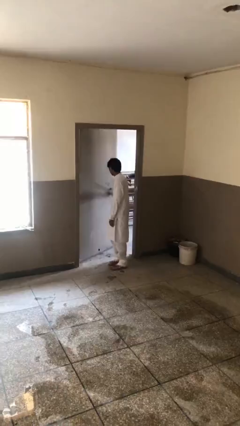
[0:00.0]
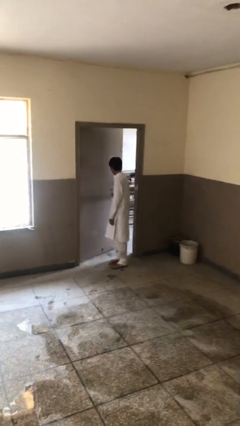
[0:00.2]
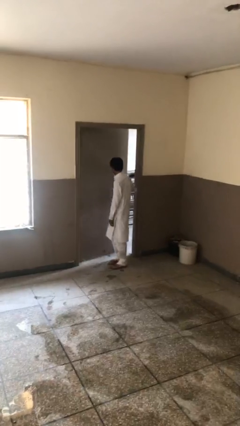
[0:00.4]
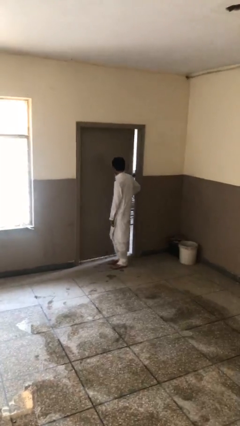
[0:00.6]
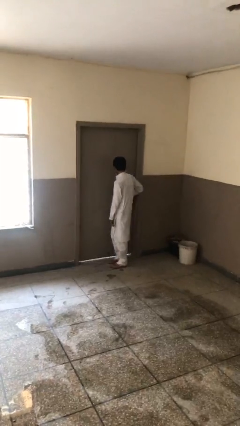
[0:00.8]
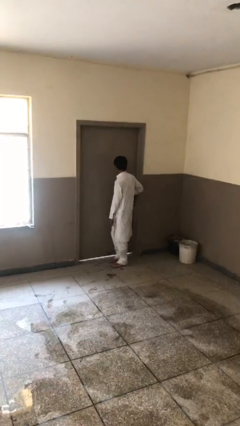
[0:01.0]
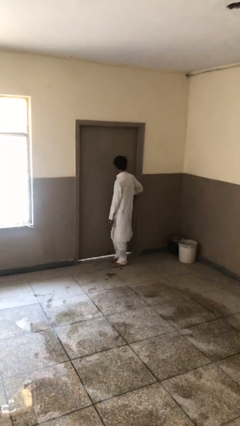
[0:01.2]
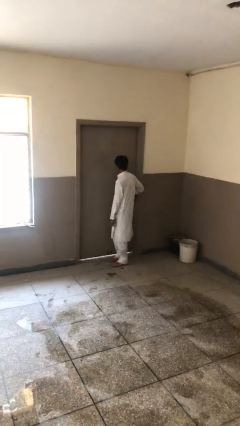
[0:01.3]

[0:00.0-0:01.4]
person closes facility door

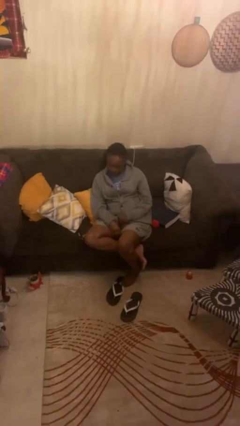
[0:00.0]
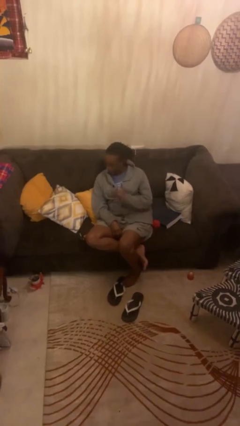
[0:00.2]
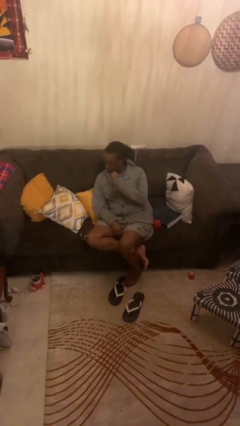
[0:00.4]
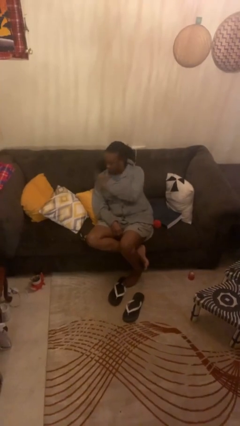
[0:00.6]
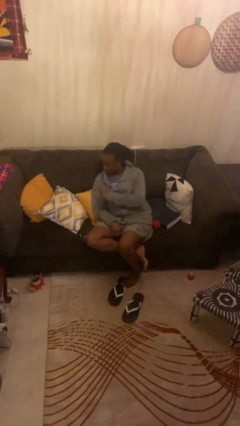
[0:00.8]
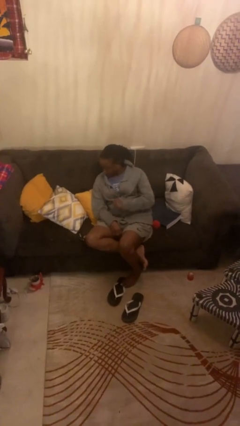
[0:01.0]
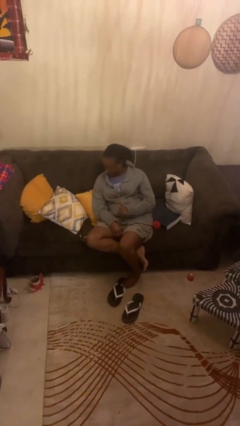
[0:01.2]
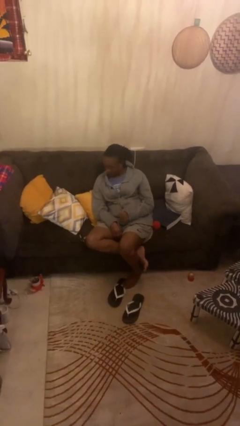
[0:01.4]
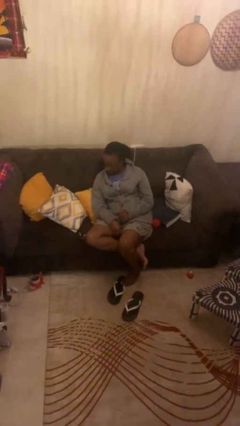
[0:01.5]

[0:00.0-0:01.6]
person swats bug

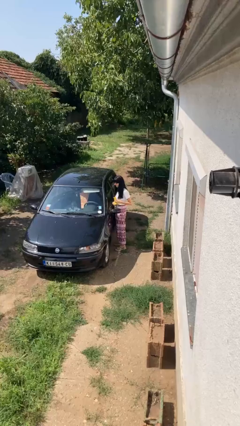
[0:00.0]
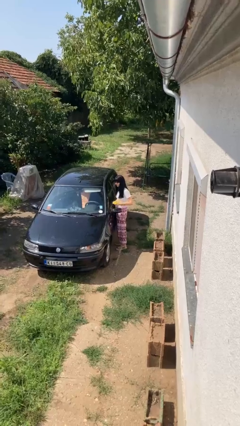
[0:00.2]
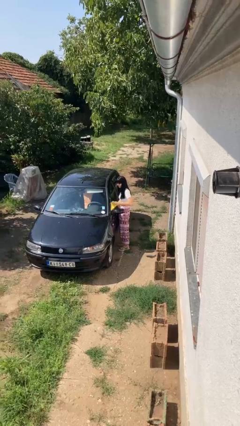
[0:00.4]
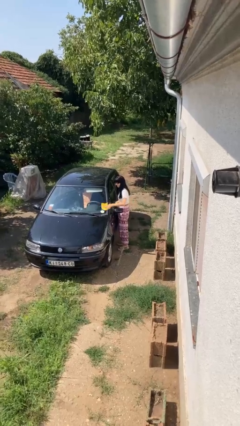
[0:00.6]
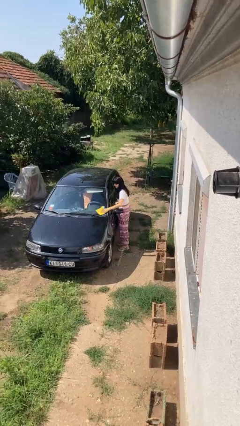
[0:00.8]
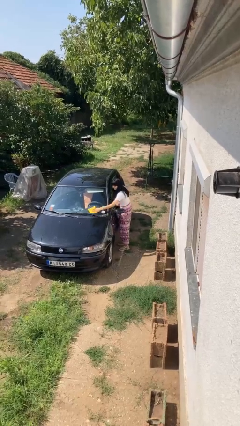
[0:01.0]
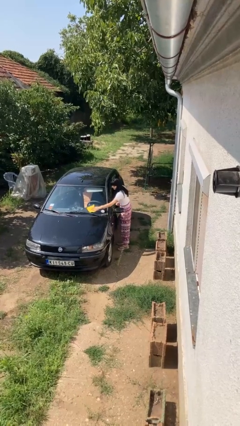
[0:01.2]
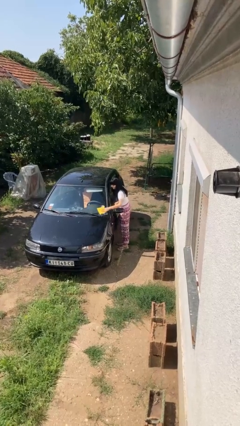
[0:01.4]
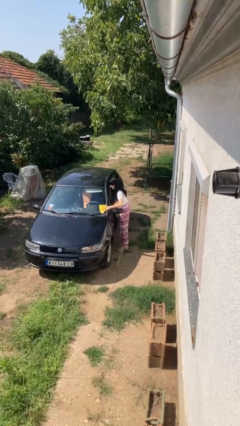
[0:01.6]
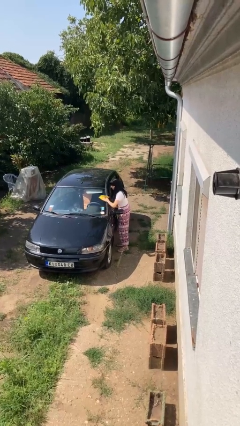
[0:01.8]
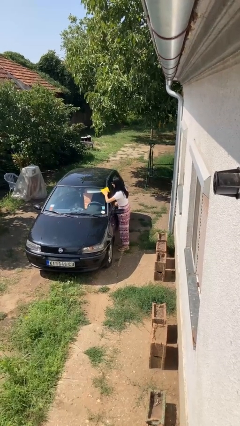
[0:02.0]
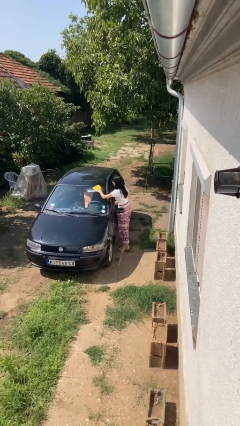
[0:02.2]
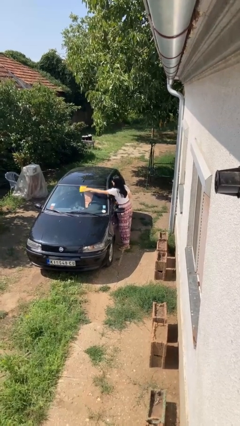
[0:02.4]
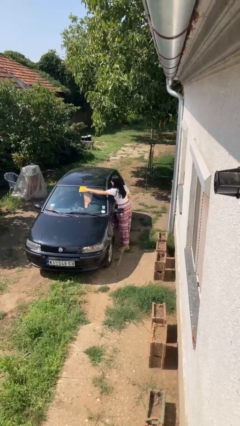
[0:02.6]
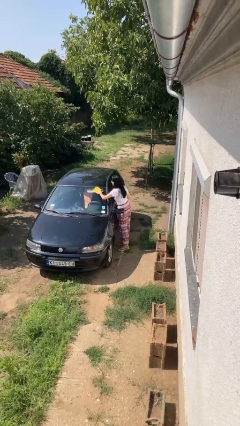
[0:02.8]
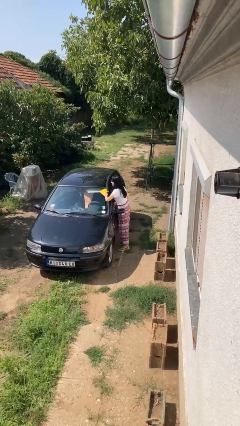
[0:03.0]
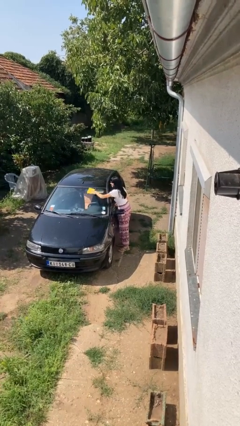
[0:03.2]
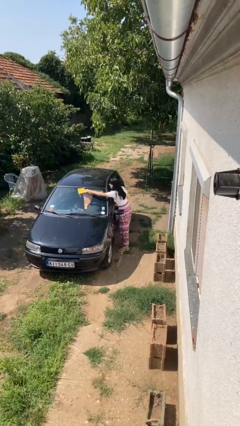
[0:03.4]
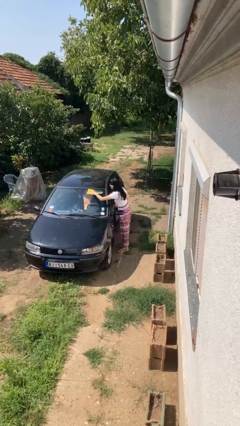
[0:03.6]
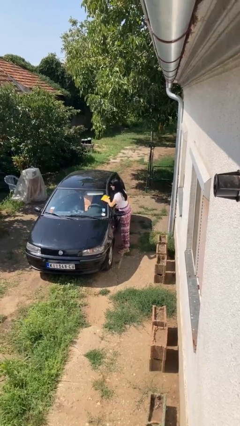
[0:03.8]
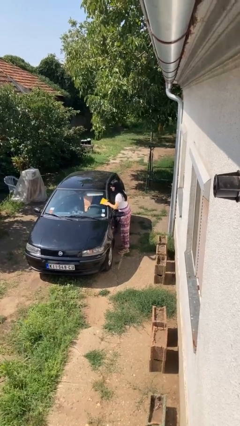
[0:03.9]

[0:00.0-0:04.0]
person polishes car with rag

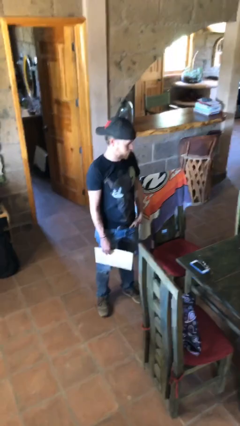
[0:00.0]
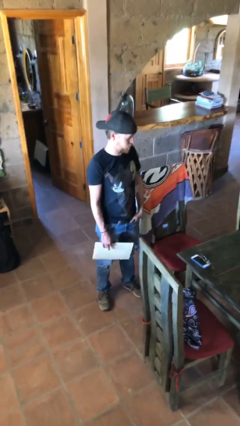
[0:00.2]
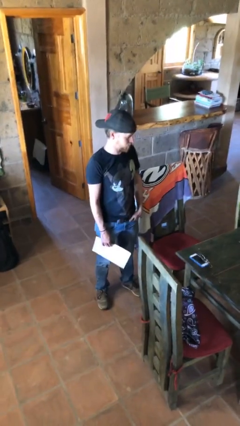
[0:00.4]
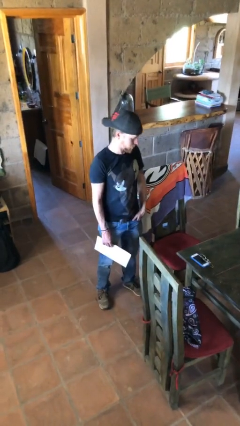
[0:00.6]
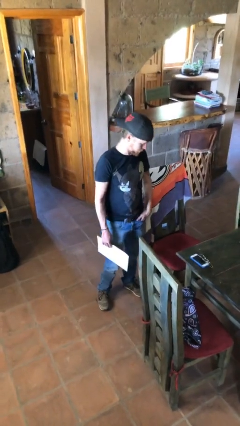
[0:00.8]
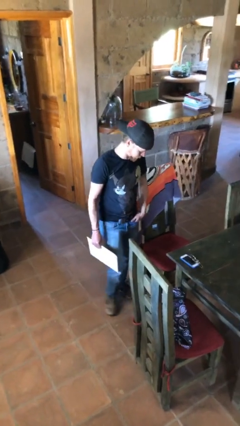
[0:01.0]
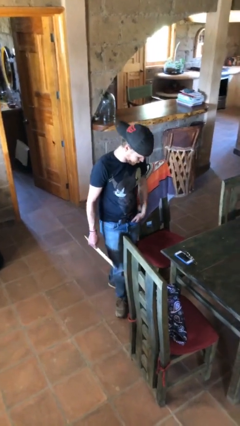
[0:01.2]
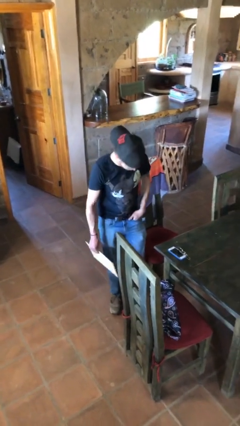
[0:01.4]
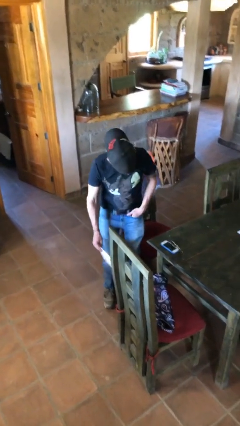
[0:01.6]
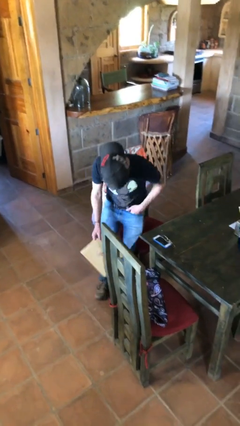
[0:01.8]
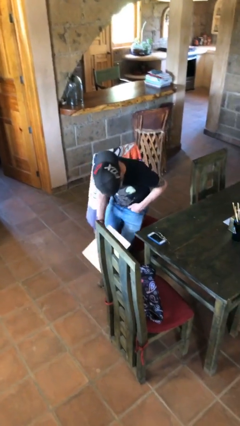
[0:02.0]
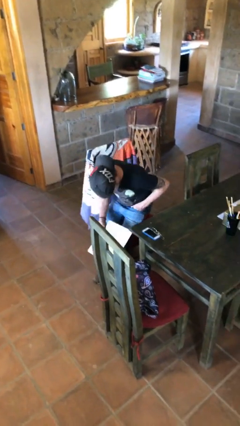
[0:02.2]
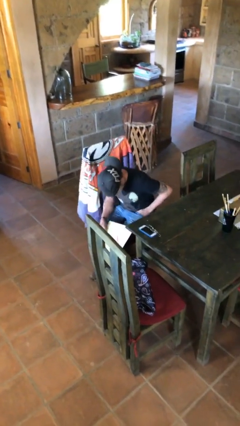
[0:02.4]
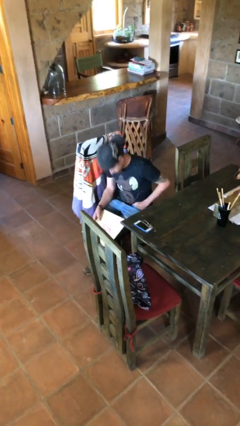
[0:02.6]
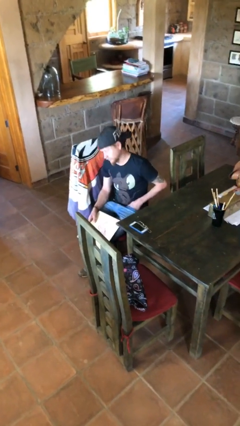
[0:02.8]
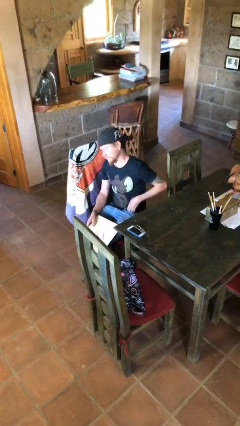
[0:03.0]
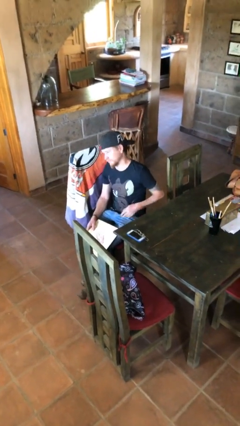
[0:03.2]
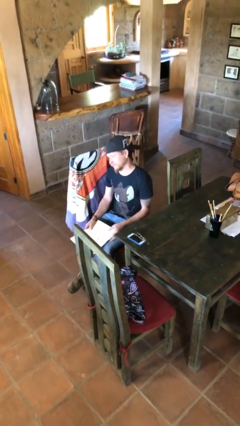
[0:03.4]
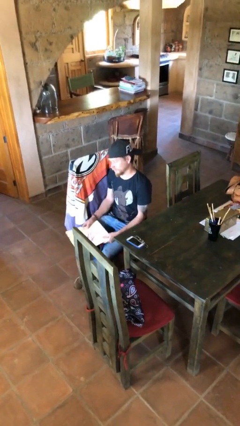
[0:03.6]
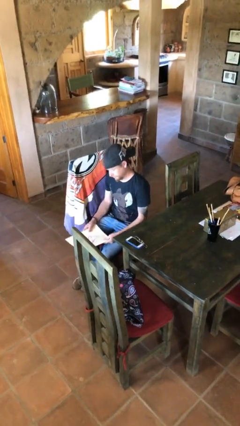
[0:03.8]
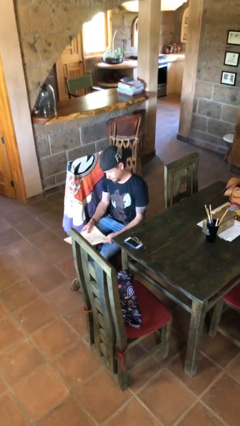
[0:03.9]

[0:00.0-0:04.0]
person sits down

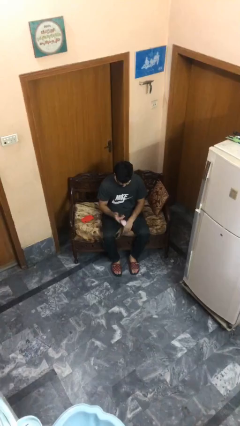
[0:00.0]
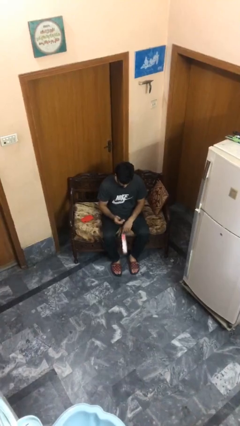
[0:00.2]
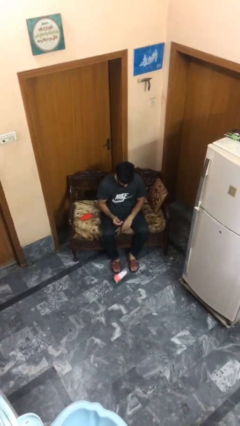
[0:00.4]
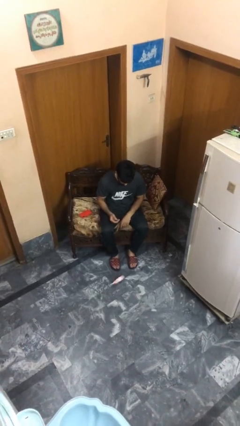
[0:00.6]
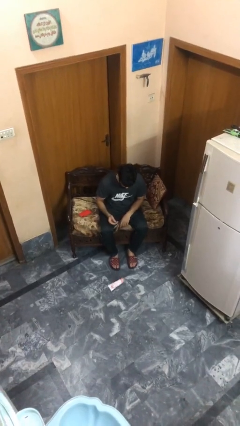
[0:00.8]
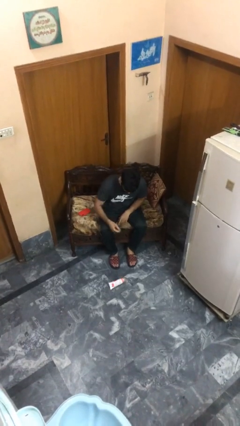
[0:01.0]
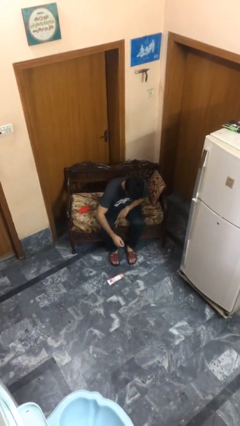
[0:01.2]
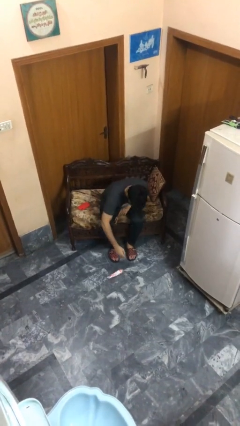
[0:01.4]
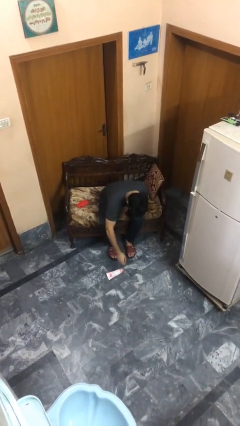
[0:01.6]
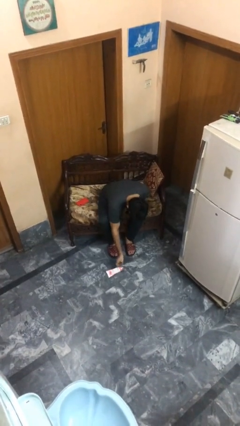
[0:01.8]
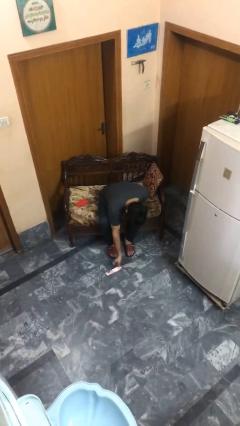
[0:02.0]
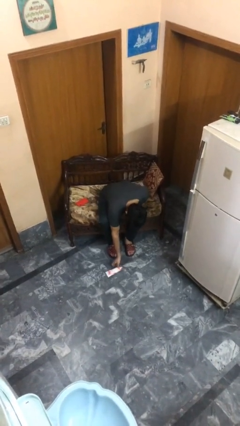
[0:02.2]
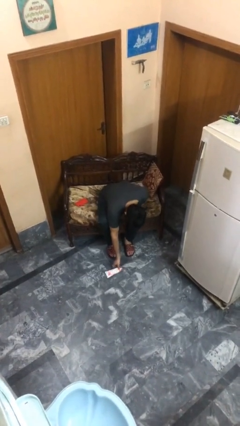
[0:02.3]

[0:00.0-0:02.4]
person drops object

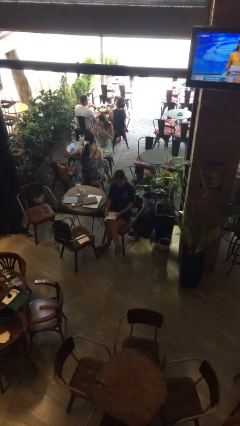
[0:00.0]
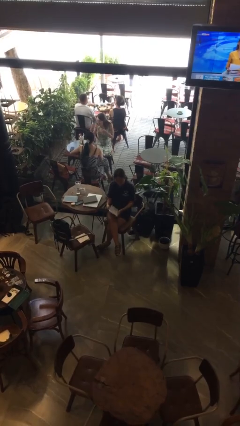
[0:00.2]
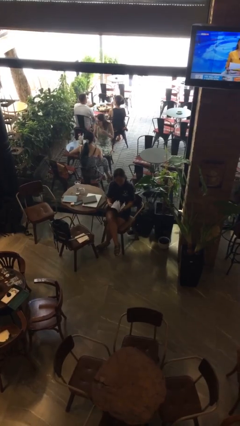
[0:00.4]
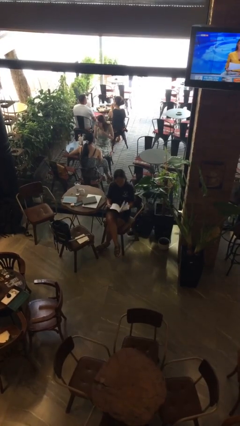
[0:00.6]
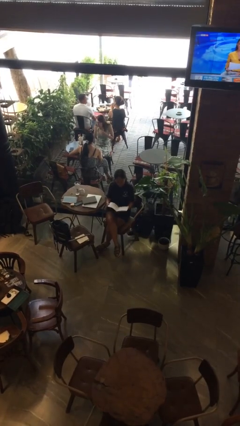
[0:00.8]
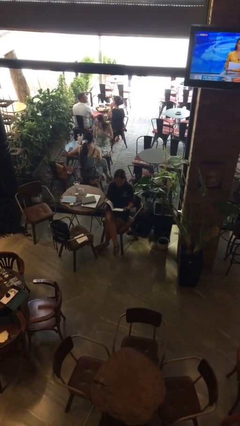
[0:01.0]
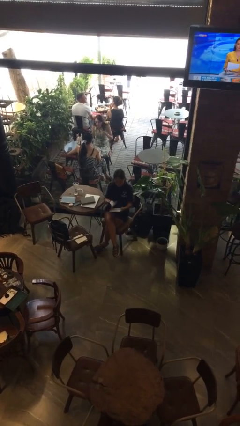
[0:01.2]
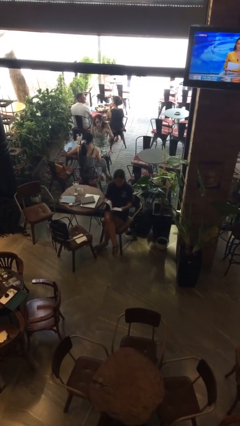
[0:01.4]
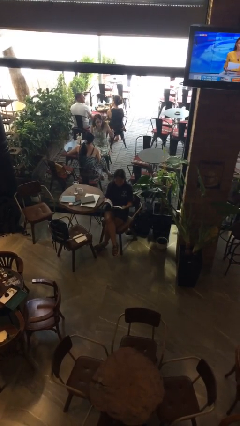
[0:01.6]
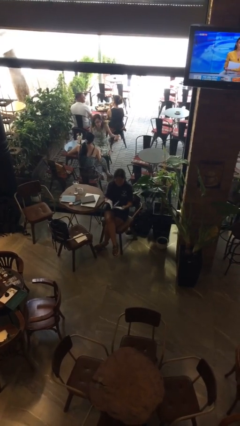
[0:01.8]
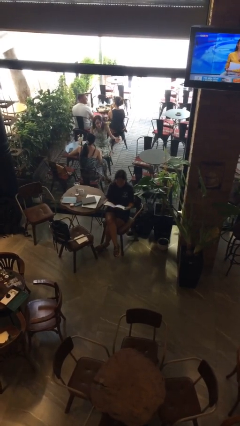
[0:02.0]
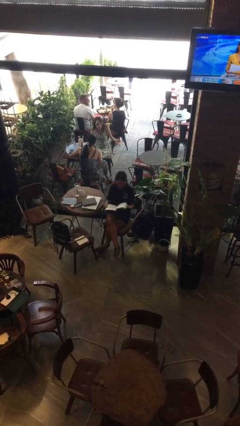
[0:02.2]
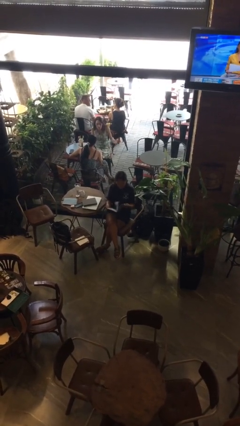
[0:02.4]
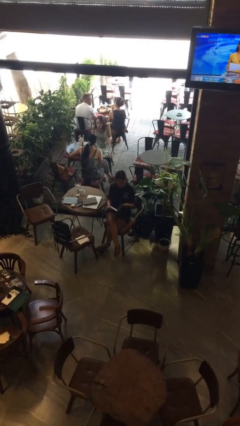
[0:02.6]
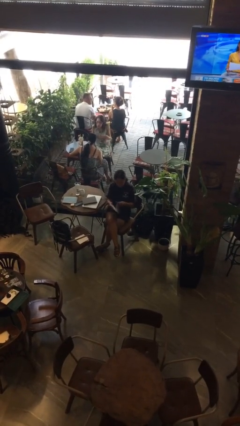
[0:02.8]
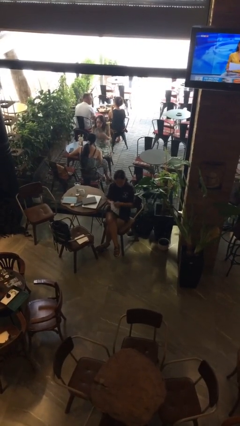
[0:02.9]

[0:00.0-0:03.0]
person reads magazine

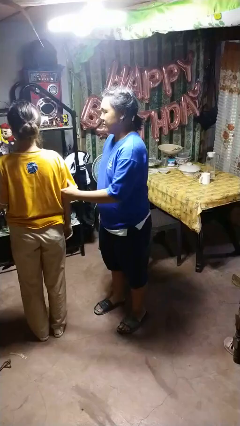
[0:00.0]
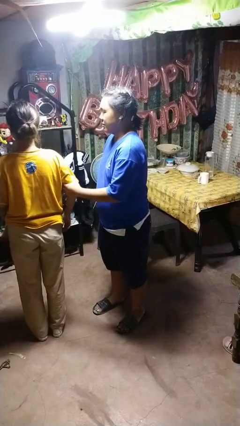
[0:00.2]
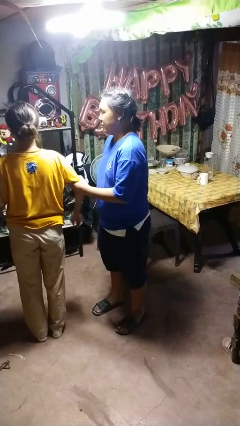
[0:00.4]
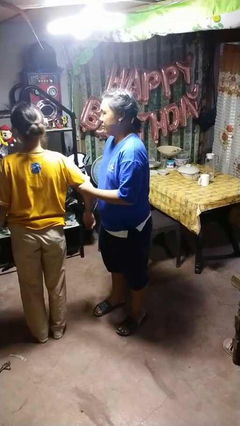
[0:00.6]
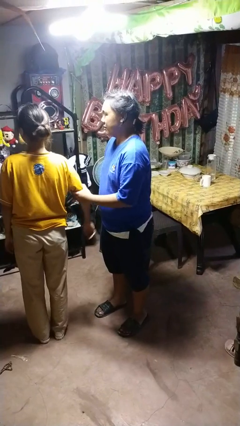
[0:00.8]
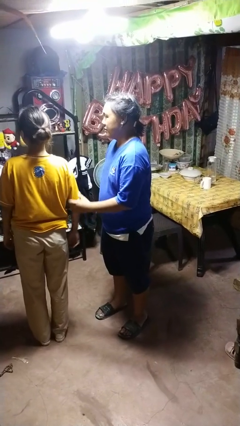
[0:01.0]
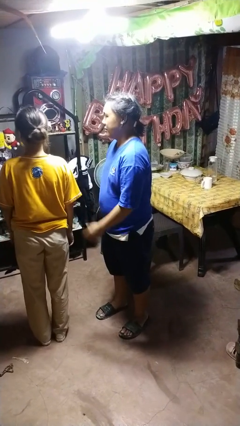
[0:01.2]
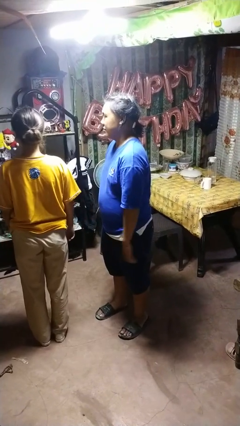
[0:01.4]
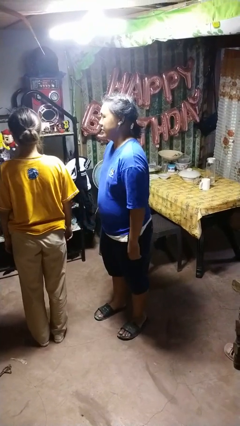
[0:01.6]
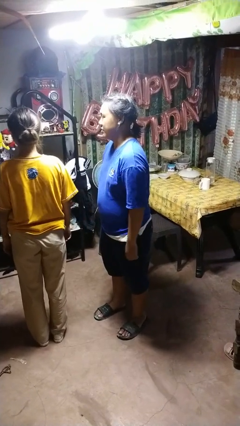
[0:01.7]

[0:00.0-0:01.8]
person grabs person by bicep
